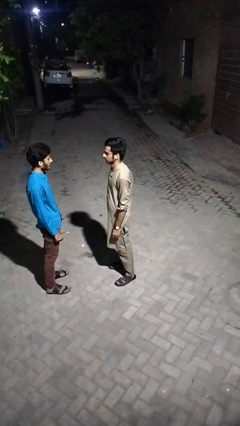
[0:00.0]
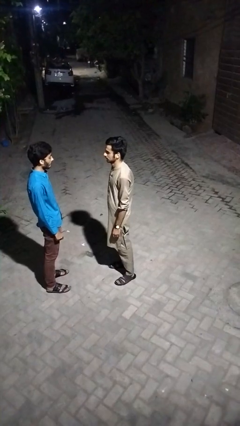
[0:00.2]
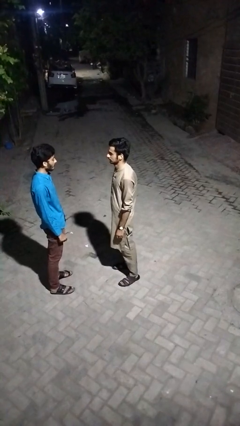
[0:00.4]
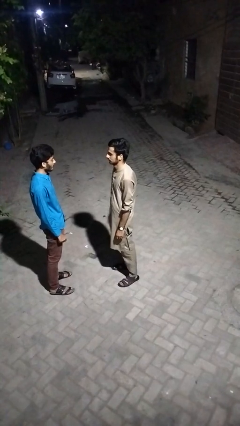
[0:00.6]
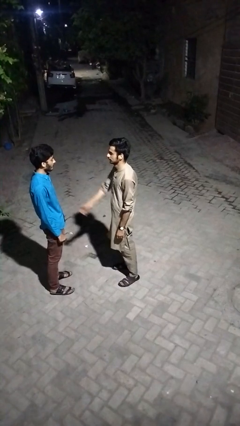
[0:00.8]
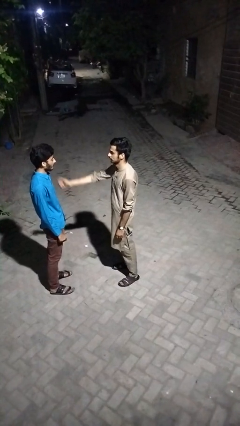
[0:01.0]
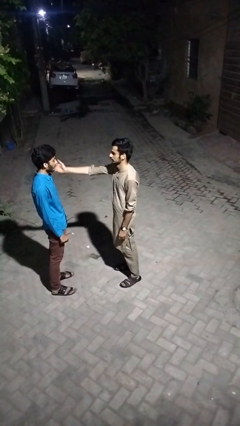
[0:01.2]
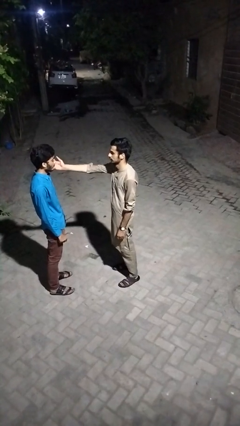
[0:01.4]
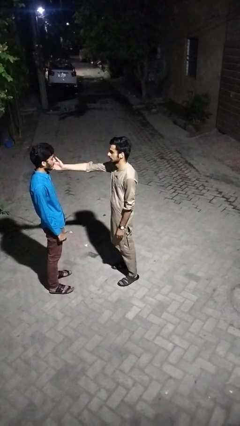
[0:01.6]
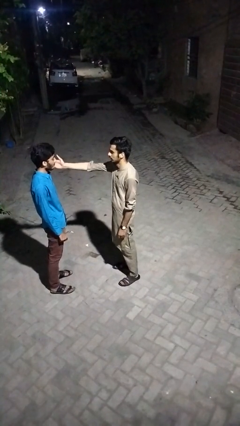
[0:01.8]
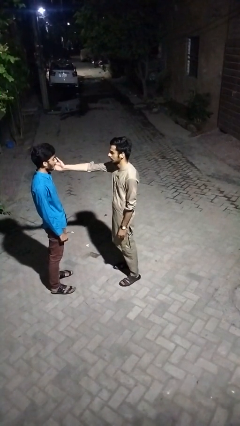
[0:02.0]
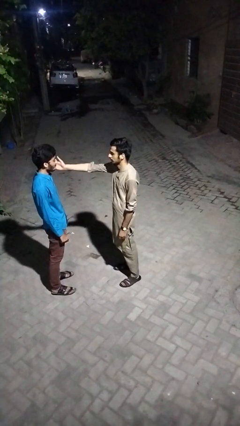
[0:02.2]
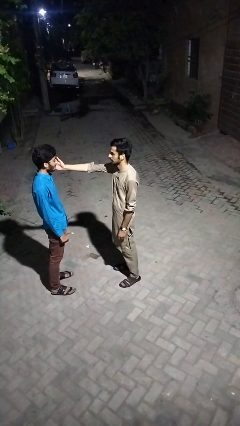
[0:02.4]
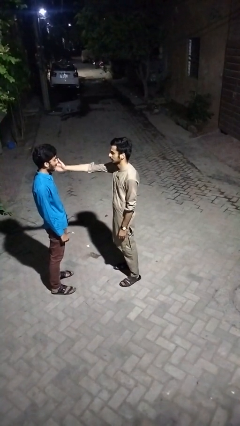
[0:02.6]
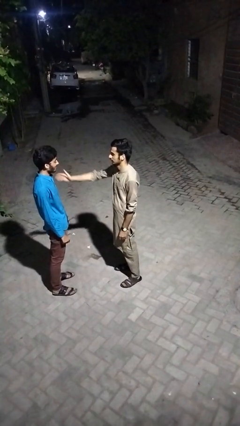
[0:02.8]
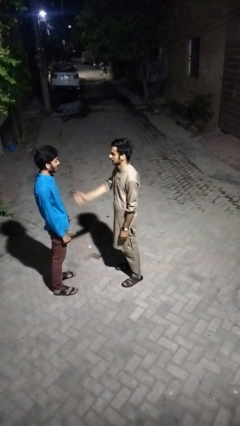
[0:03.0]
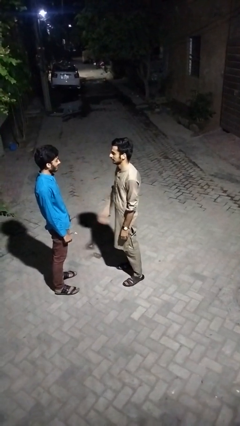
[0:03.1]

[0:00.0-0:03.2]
person touches face of person

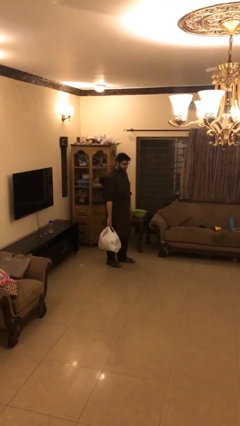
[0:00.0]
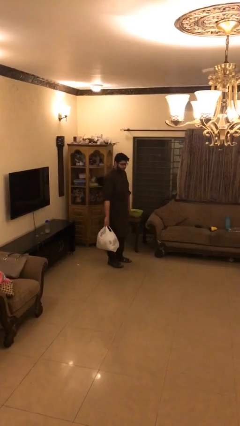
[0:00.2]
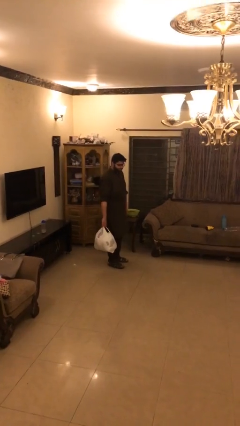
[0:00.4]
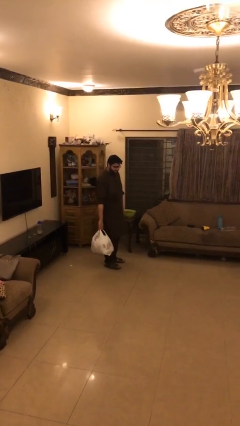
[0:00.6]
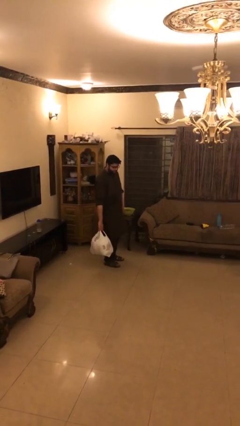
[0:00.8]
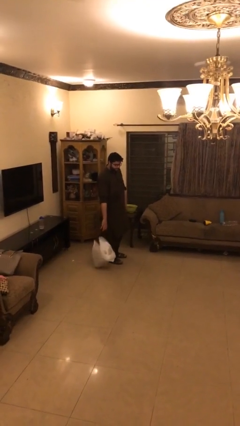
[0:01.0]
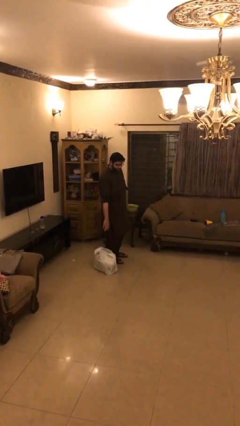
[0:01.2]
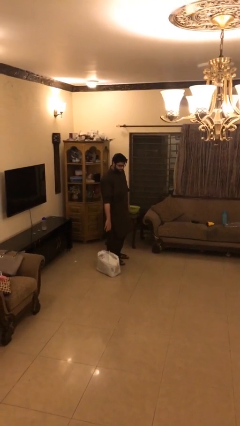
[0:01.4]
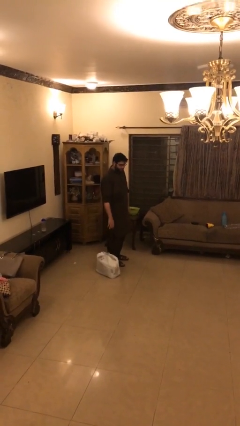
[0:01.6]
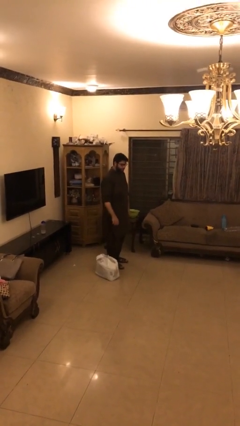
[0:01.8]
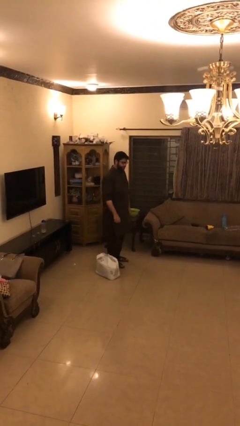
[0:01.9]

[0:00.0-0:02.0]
person puts down object on floor

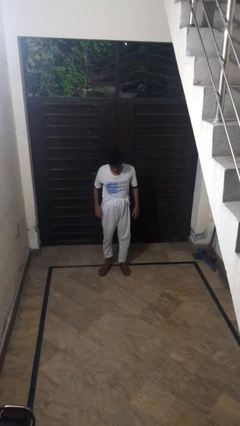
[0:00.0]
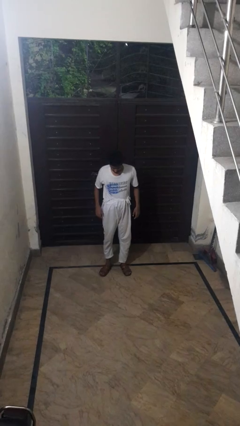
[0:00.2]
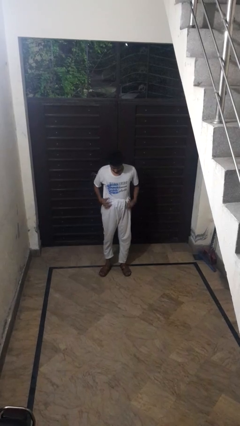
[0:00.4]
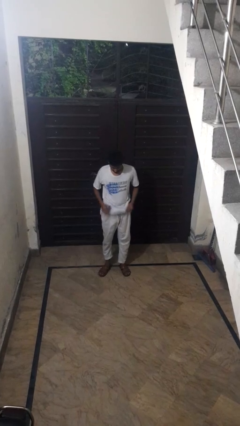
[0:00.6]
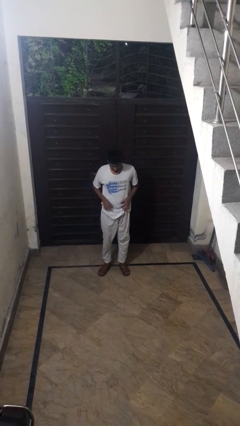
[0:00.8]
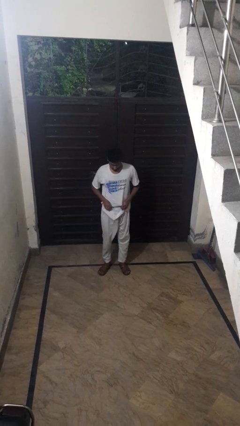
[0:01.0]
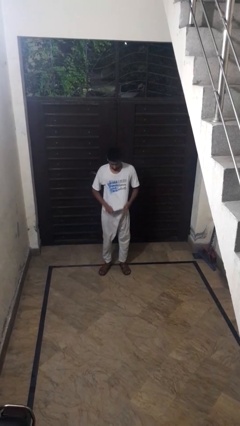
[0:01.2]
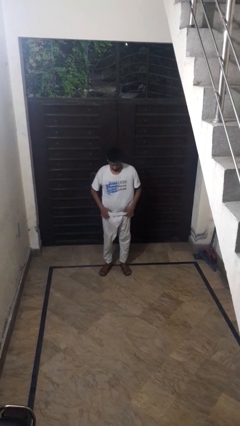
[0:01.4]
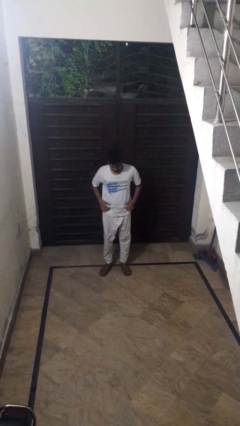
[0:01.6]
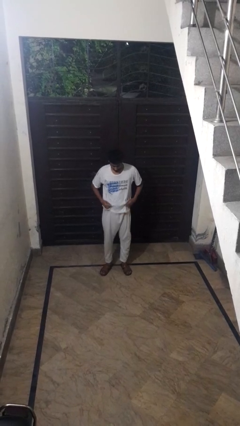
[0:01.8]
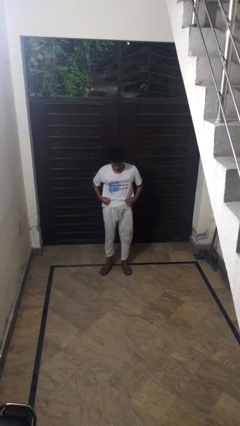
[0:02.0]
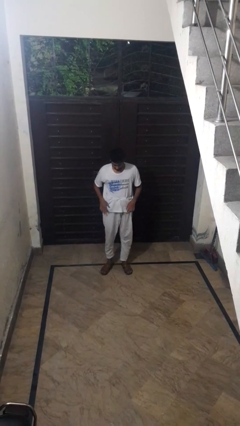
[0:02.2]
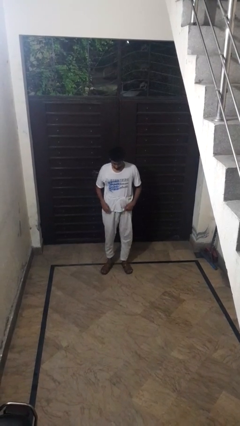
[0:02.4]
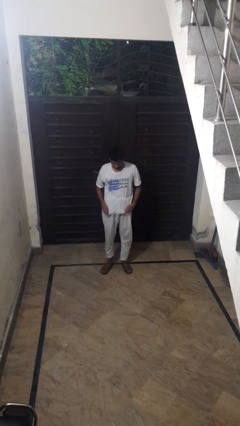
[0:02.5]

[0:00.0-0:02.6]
person untucks shirt

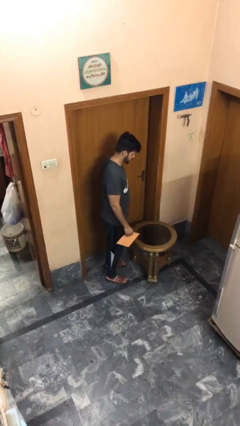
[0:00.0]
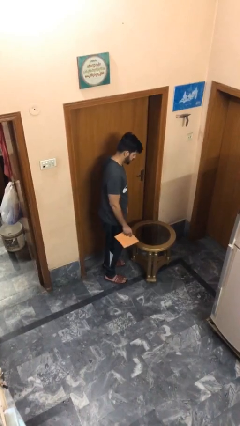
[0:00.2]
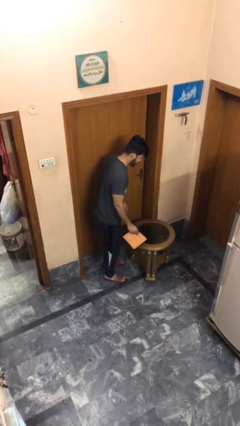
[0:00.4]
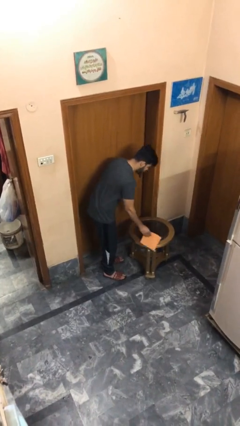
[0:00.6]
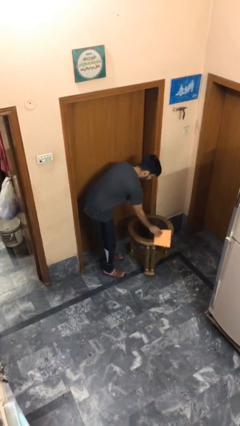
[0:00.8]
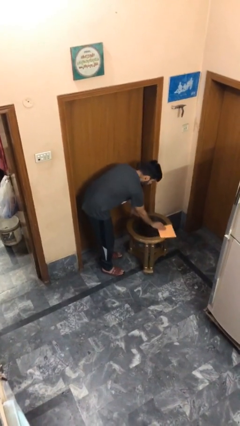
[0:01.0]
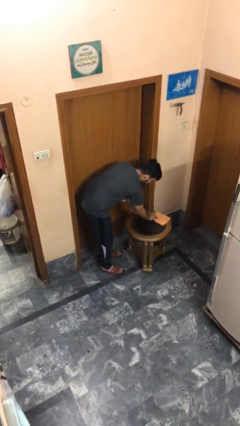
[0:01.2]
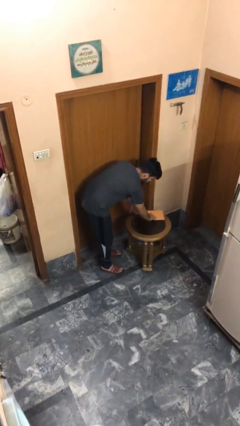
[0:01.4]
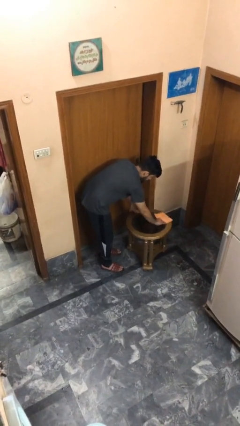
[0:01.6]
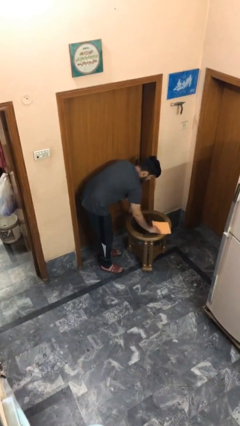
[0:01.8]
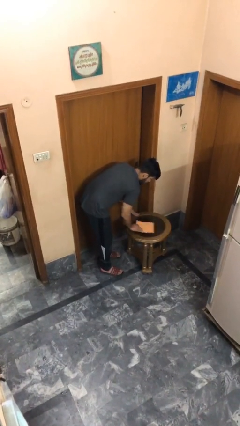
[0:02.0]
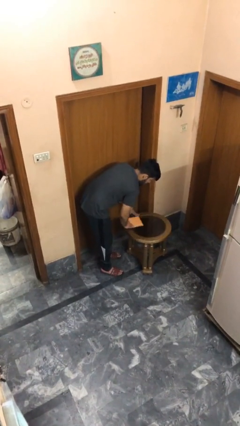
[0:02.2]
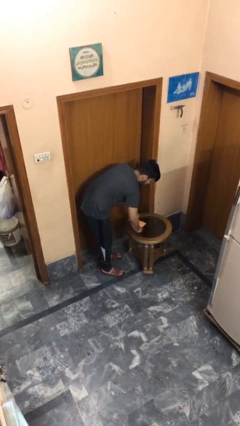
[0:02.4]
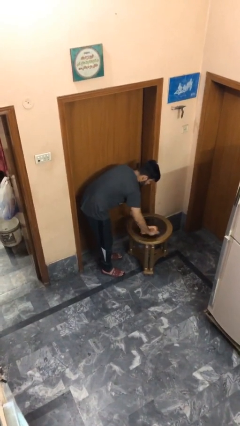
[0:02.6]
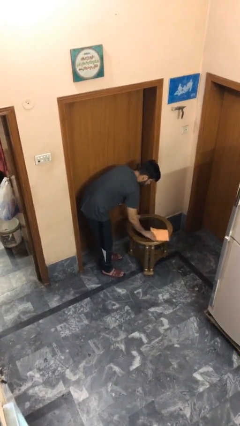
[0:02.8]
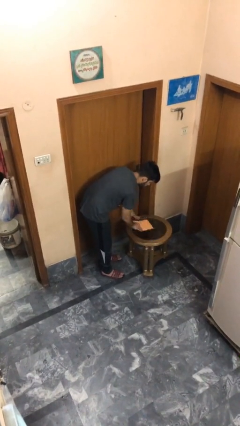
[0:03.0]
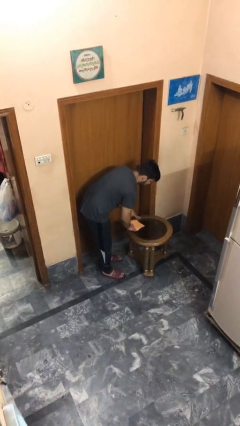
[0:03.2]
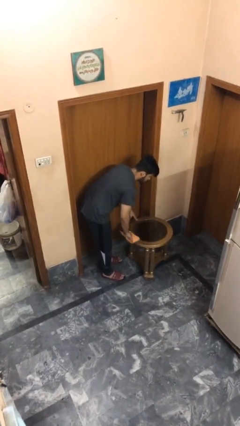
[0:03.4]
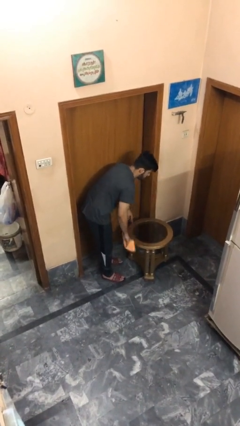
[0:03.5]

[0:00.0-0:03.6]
person cleans table with rag

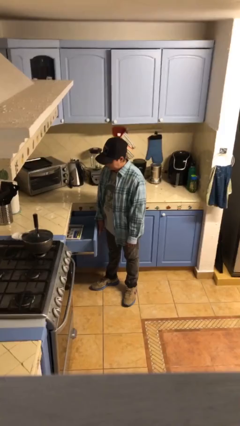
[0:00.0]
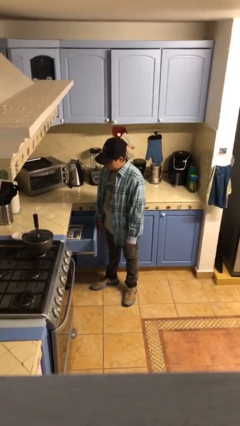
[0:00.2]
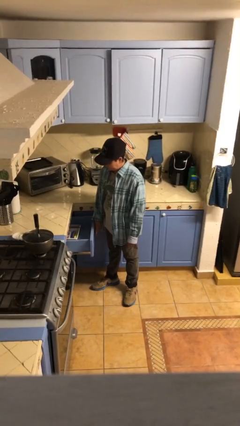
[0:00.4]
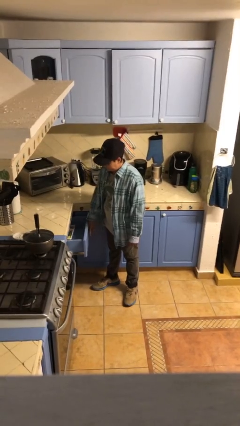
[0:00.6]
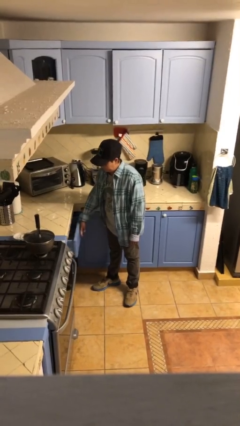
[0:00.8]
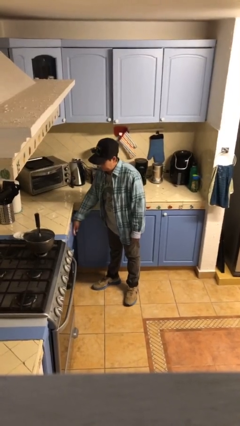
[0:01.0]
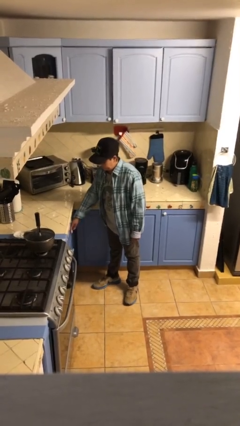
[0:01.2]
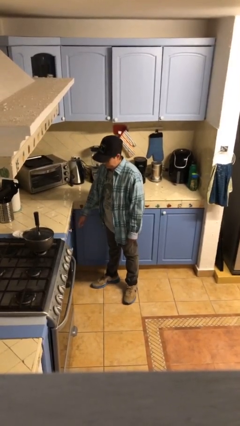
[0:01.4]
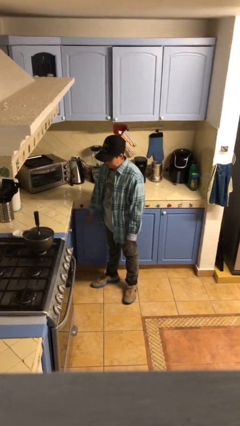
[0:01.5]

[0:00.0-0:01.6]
person closes kitchen drawer

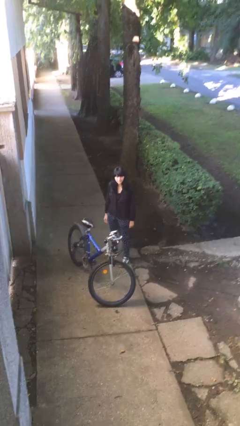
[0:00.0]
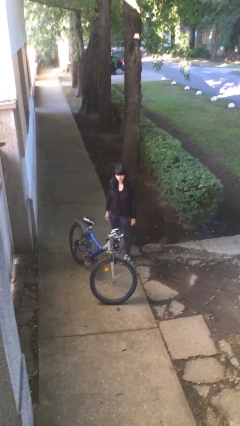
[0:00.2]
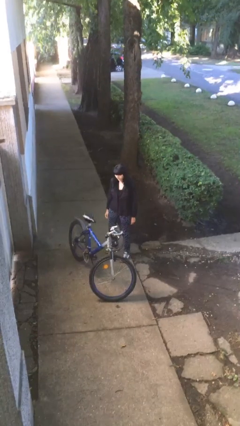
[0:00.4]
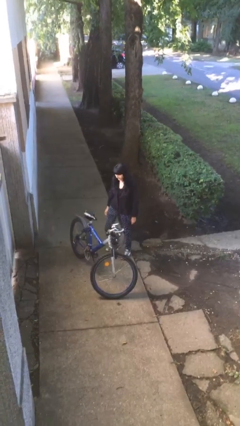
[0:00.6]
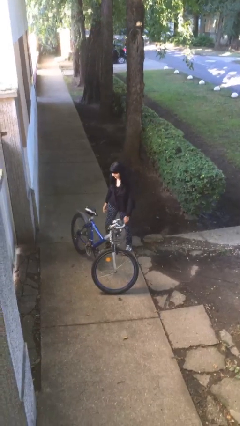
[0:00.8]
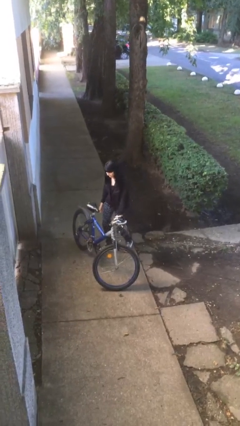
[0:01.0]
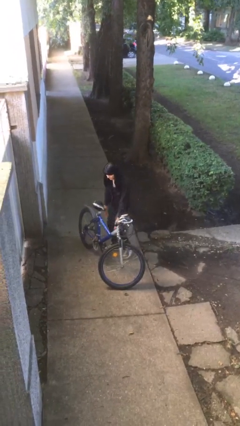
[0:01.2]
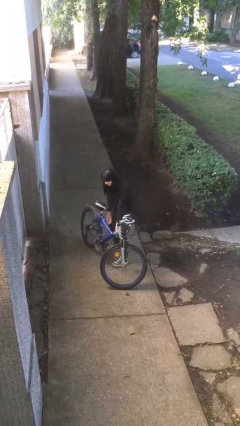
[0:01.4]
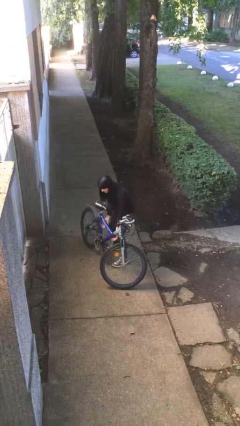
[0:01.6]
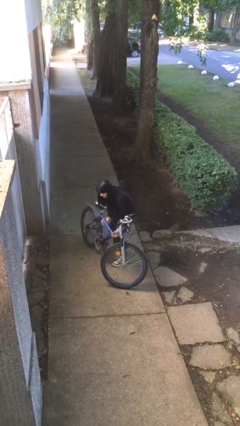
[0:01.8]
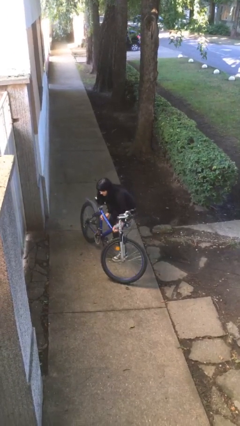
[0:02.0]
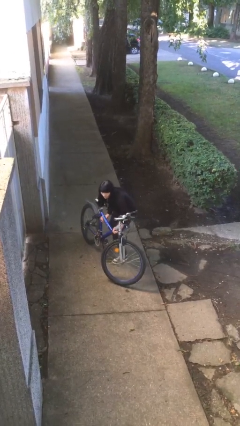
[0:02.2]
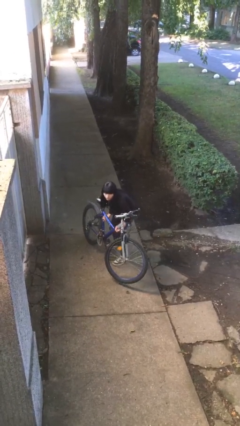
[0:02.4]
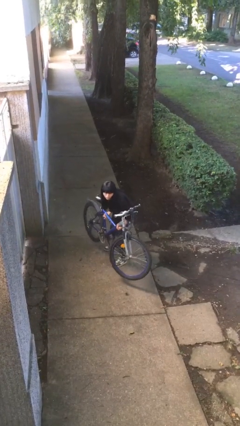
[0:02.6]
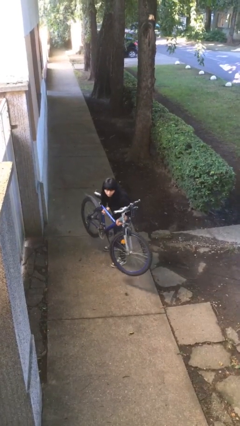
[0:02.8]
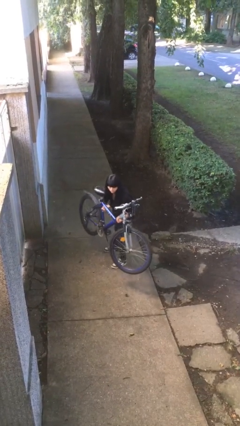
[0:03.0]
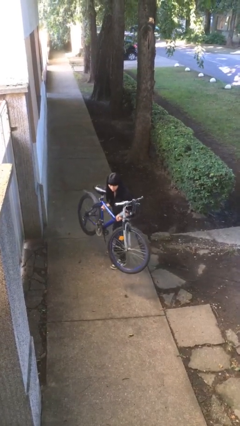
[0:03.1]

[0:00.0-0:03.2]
person picks up object from floor

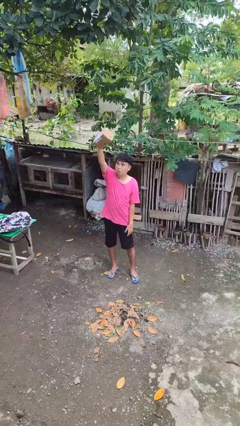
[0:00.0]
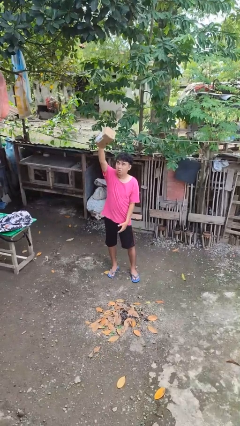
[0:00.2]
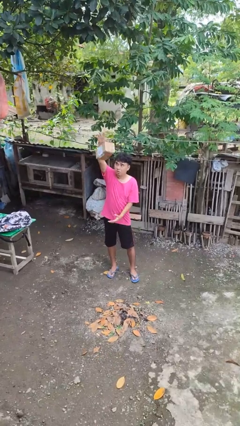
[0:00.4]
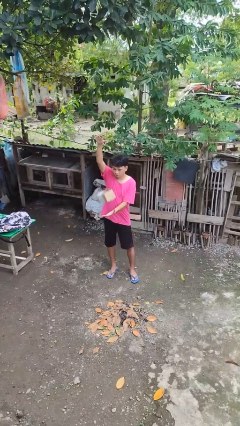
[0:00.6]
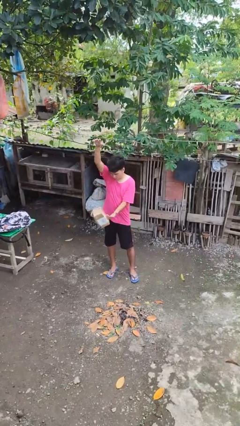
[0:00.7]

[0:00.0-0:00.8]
person drops object

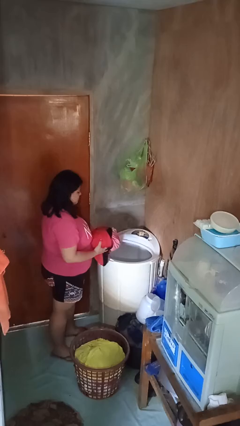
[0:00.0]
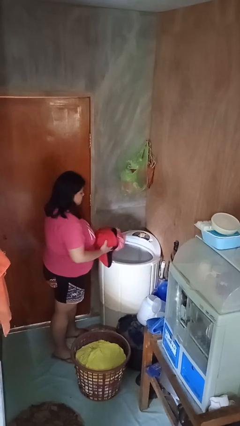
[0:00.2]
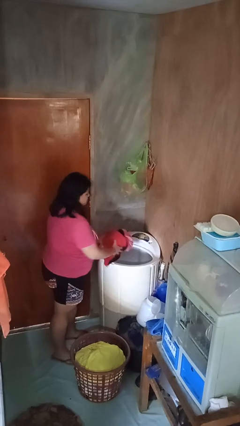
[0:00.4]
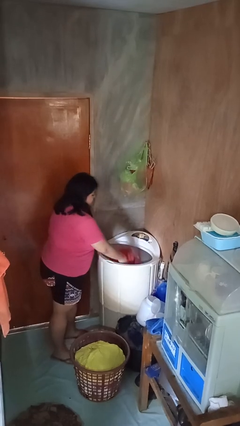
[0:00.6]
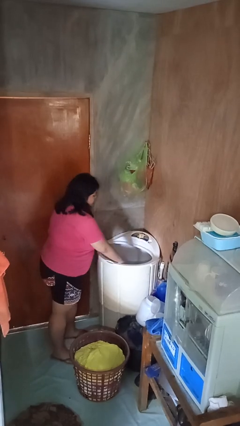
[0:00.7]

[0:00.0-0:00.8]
person loads clotheswasher
